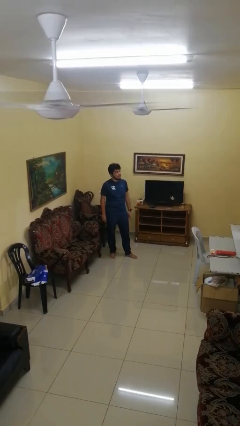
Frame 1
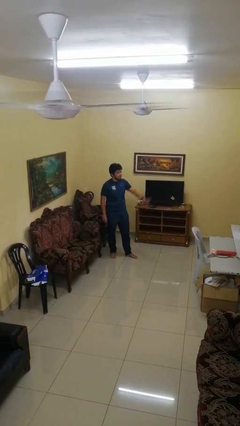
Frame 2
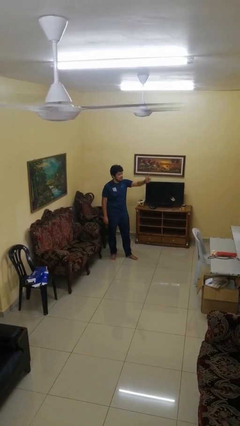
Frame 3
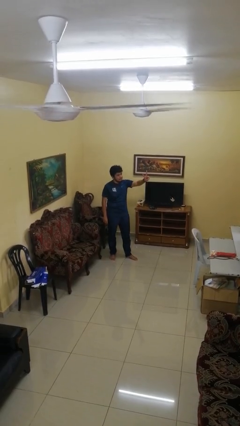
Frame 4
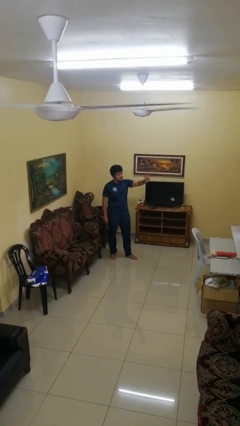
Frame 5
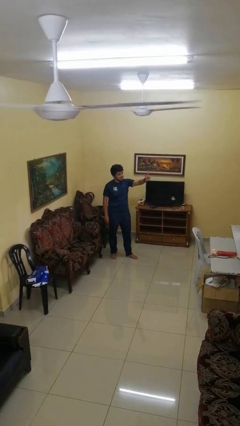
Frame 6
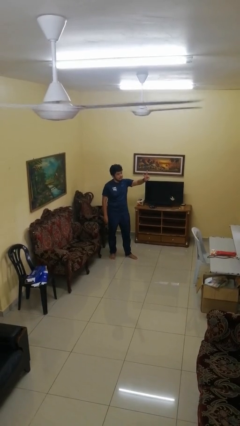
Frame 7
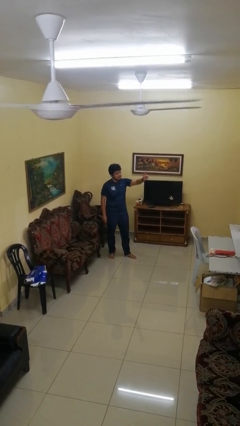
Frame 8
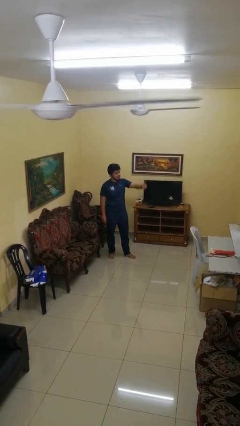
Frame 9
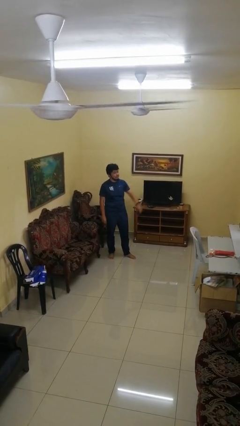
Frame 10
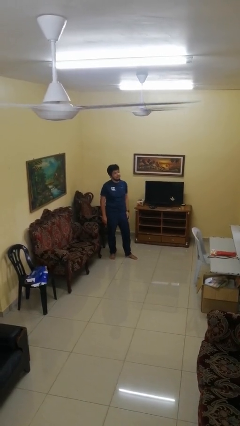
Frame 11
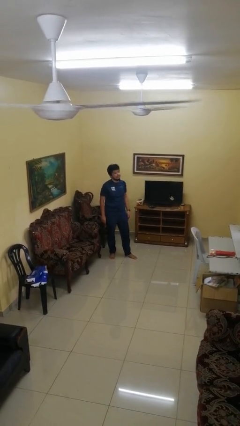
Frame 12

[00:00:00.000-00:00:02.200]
person gestures peace

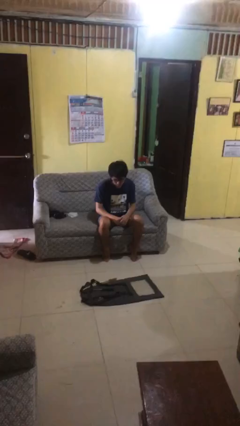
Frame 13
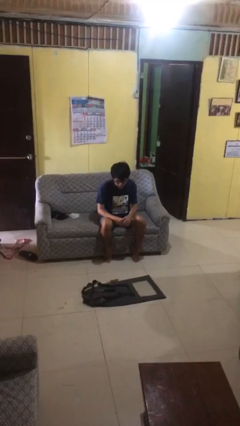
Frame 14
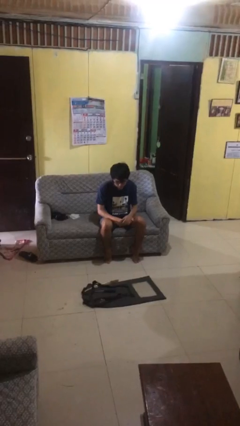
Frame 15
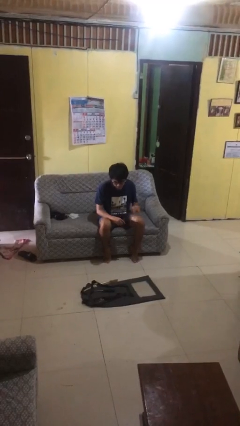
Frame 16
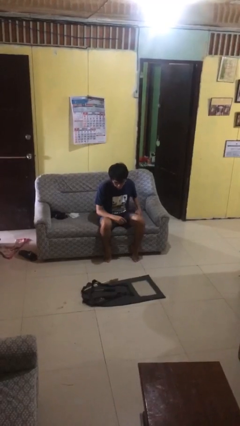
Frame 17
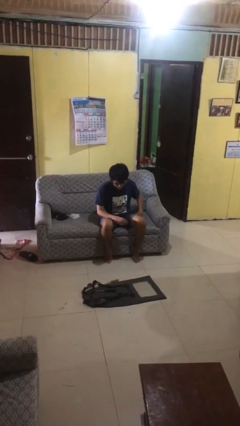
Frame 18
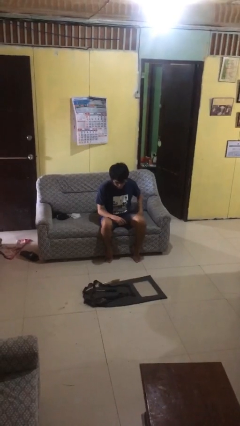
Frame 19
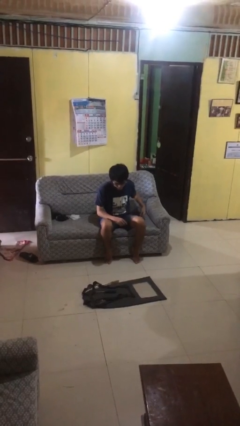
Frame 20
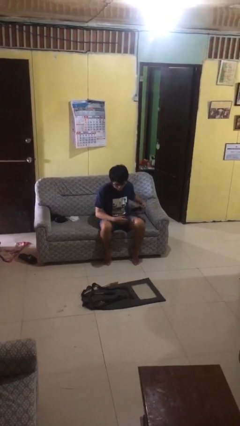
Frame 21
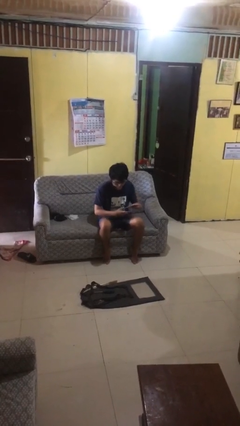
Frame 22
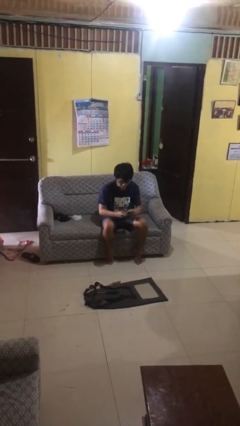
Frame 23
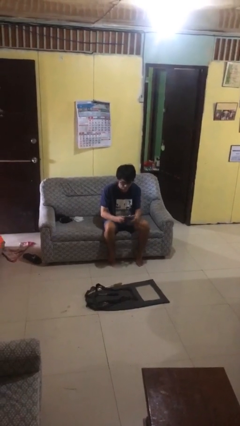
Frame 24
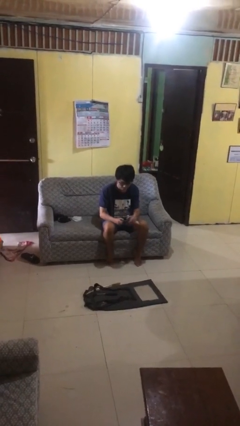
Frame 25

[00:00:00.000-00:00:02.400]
person takes phone from pocket

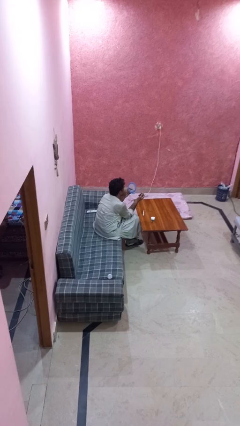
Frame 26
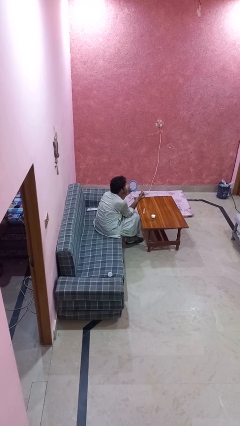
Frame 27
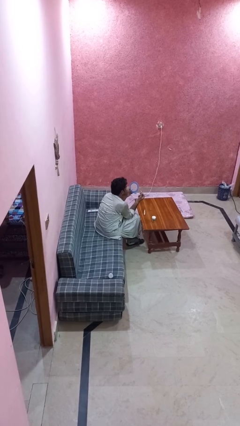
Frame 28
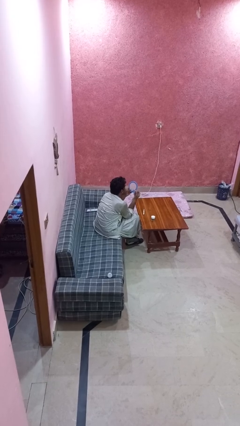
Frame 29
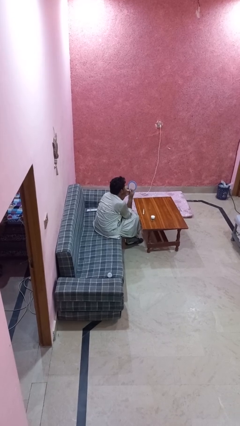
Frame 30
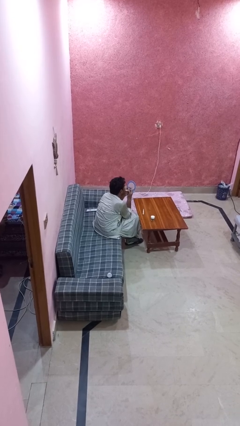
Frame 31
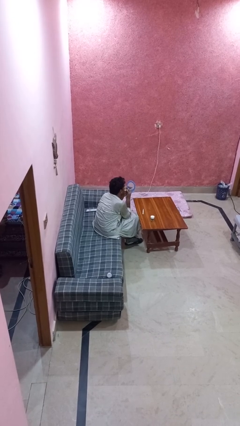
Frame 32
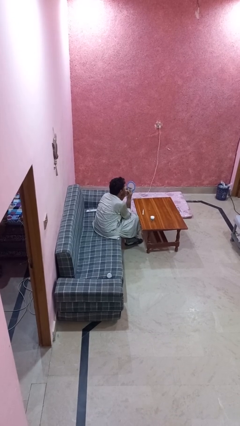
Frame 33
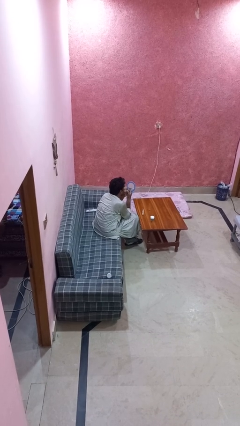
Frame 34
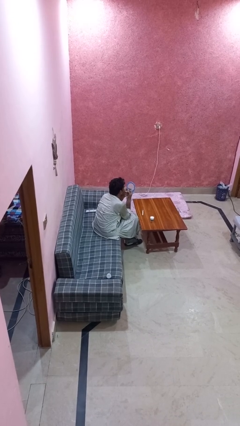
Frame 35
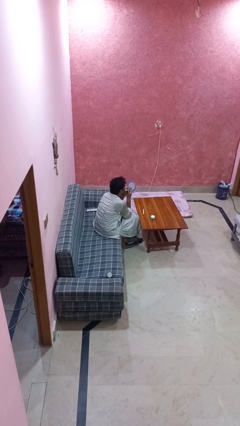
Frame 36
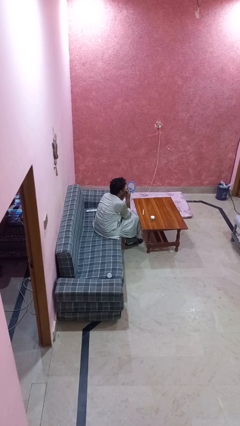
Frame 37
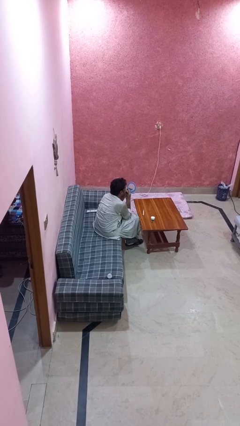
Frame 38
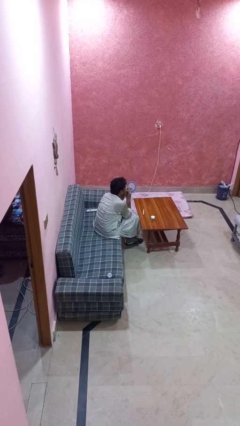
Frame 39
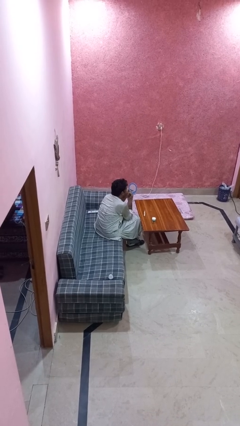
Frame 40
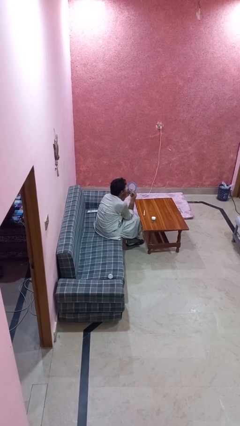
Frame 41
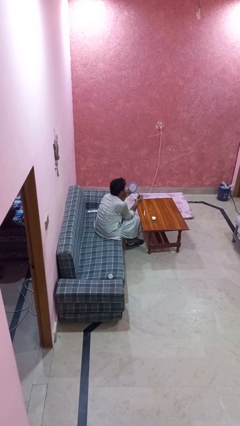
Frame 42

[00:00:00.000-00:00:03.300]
person applies lip makeup

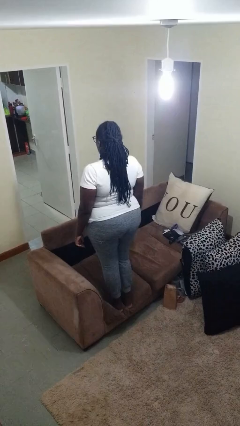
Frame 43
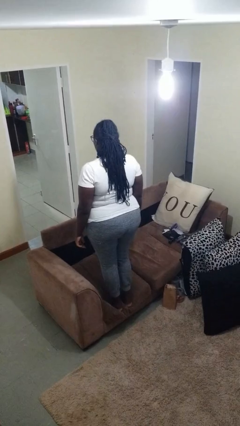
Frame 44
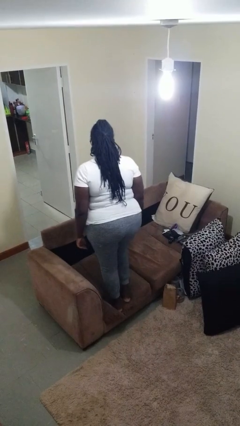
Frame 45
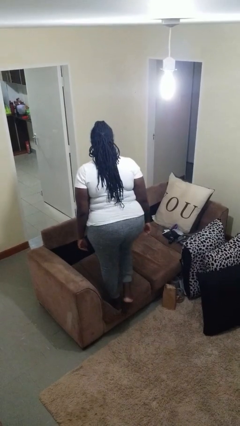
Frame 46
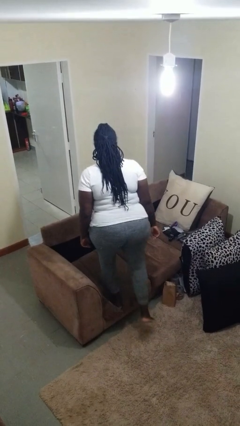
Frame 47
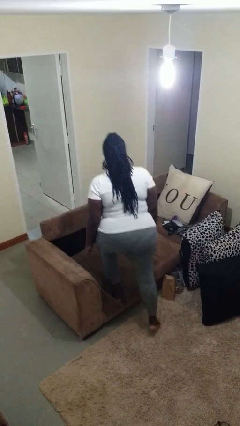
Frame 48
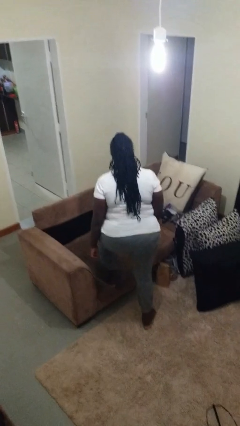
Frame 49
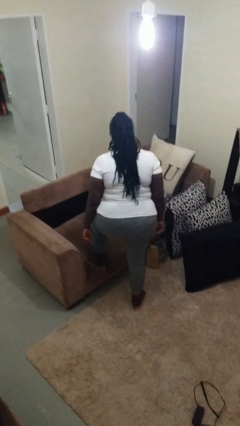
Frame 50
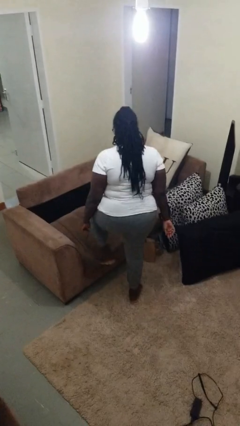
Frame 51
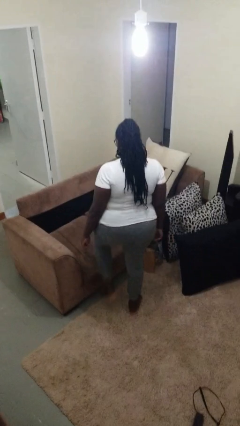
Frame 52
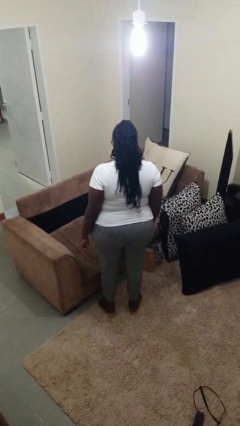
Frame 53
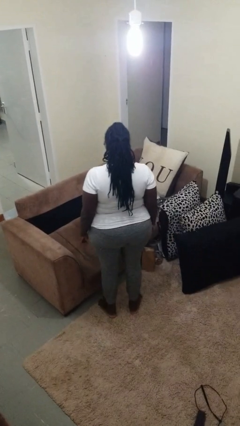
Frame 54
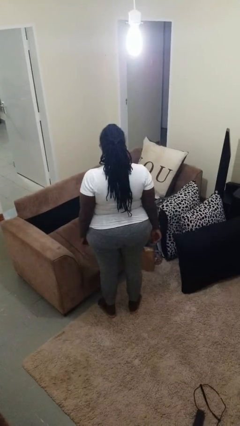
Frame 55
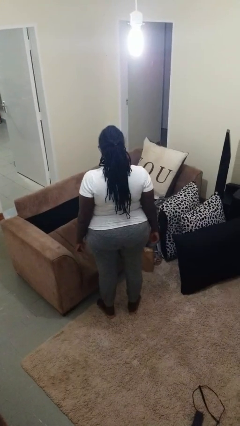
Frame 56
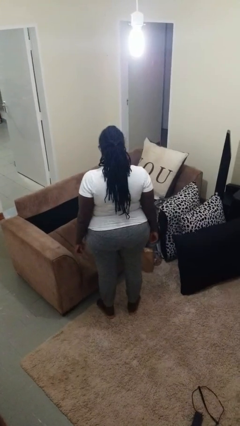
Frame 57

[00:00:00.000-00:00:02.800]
person climbs off couch

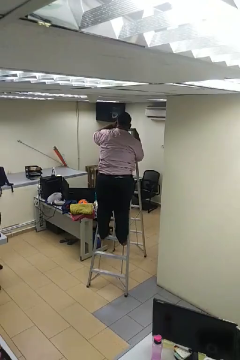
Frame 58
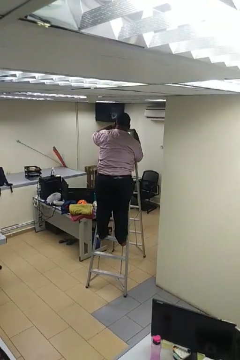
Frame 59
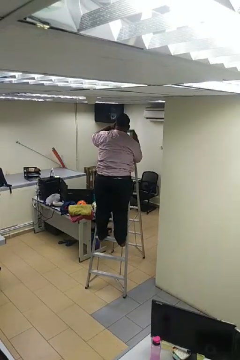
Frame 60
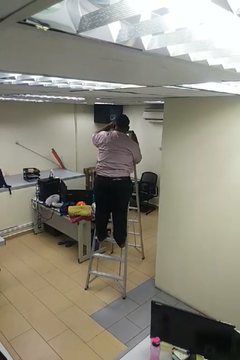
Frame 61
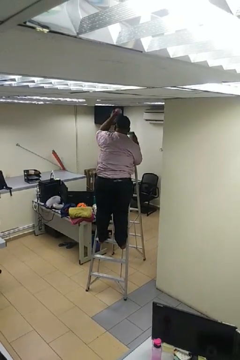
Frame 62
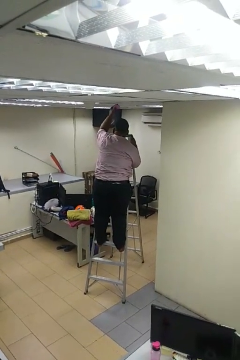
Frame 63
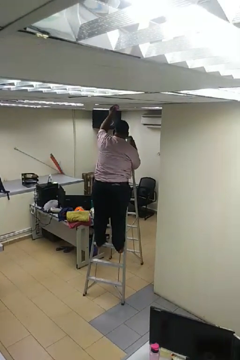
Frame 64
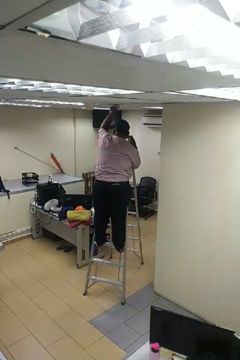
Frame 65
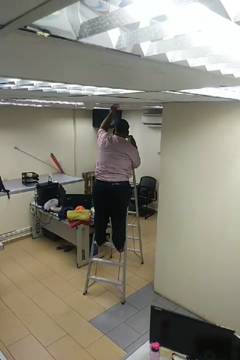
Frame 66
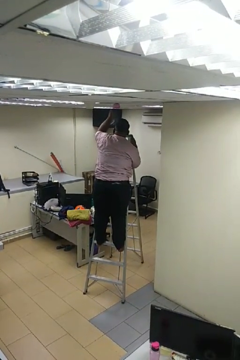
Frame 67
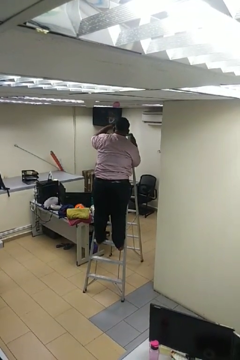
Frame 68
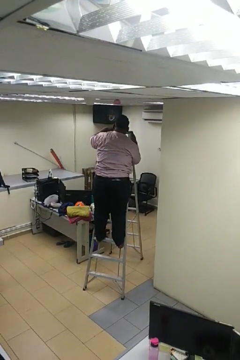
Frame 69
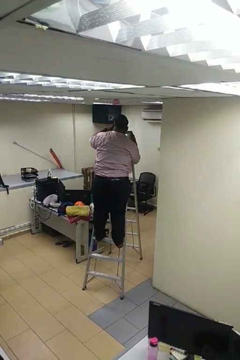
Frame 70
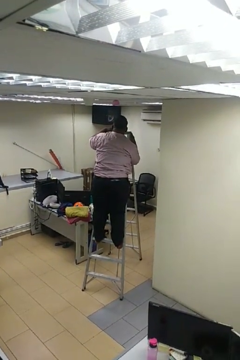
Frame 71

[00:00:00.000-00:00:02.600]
person puts up smoke detector

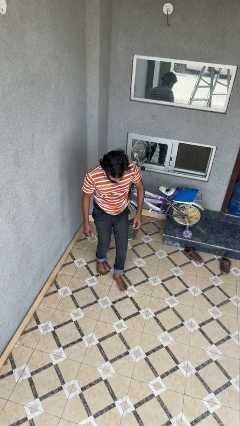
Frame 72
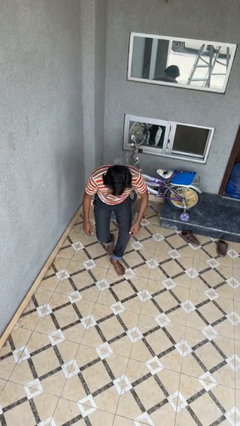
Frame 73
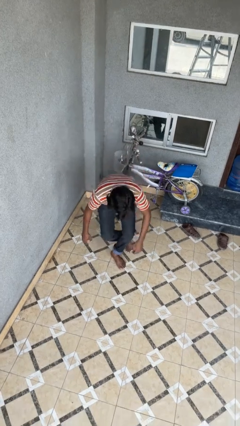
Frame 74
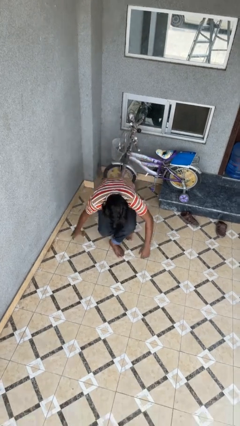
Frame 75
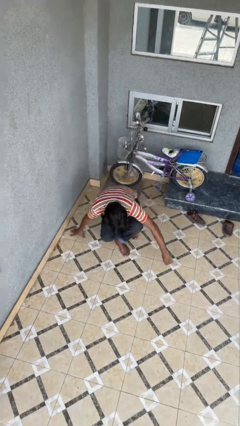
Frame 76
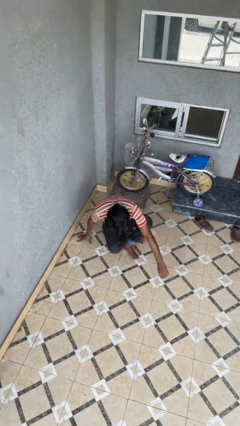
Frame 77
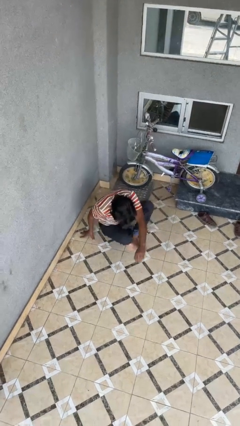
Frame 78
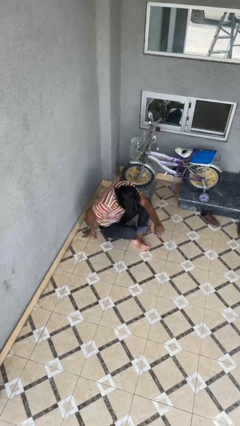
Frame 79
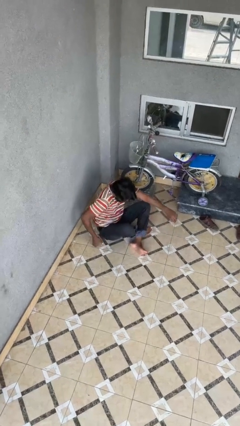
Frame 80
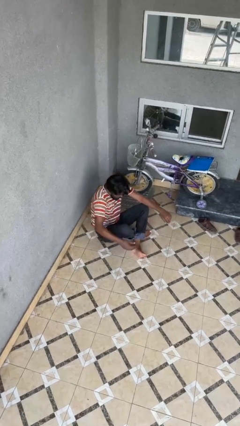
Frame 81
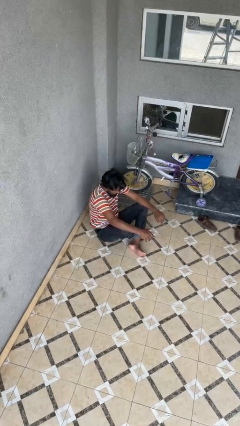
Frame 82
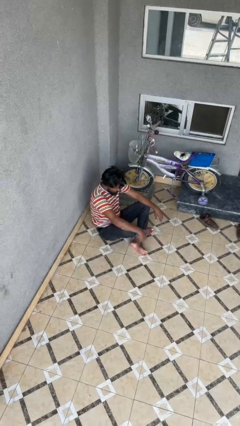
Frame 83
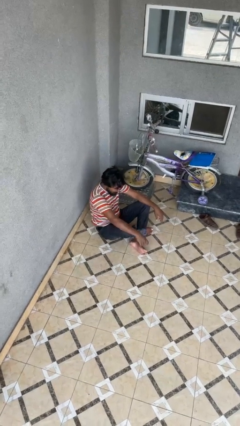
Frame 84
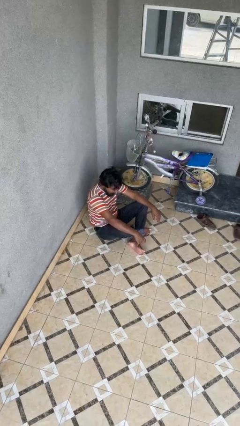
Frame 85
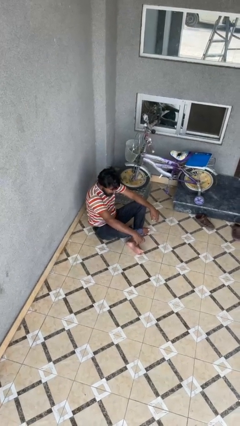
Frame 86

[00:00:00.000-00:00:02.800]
person sits crisscross

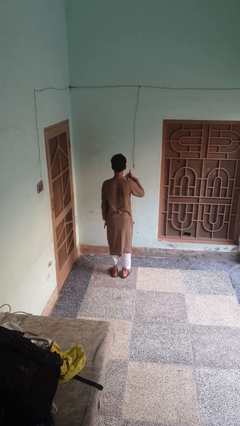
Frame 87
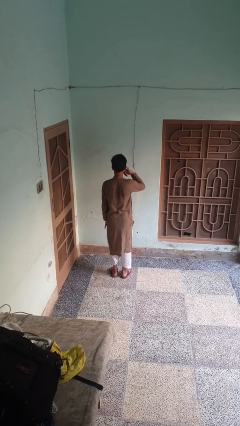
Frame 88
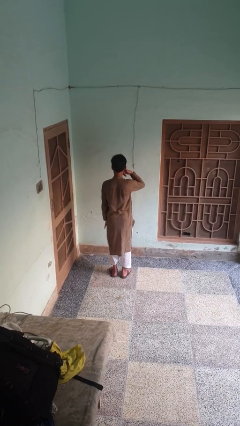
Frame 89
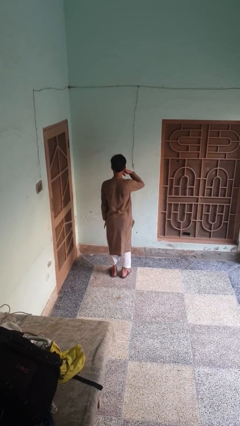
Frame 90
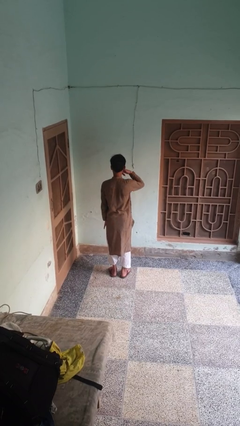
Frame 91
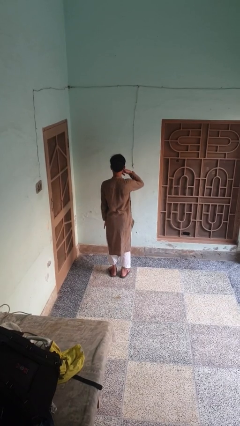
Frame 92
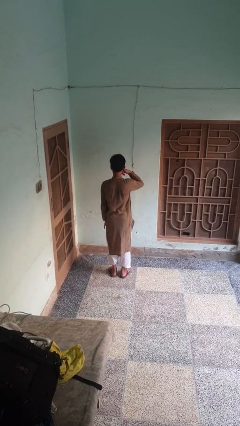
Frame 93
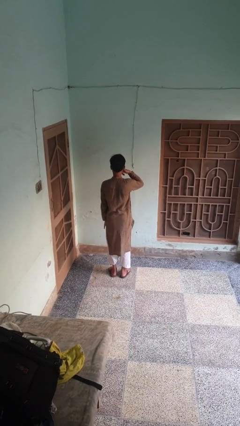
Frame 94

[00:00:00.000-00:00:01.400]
person gestures call me
